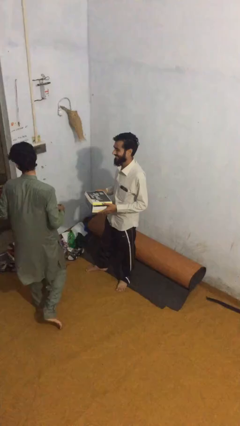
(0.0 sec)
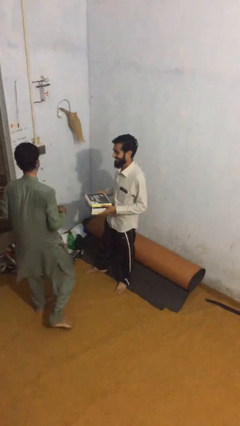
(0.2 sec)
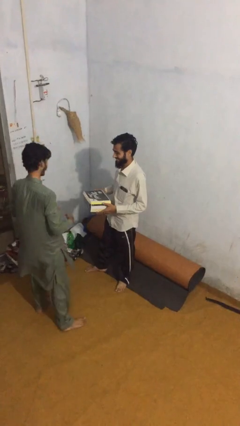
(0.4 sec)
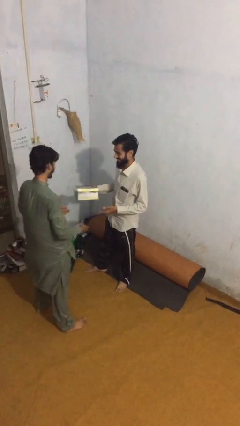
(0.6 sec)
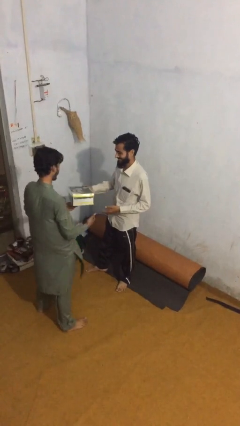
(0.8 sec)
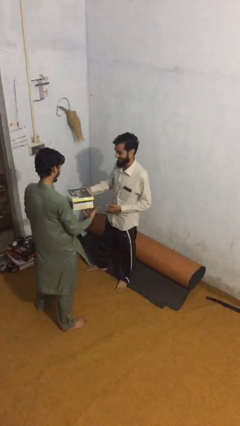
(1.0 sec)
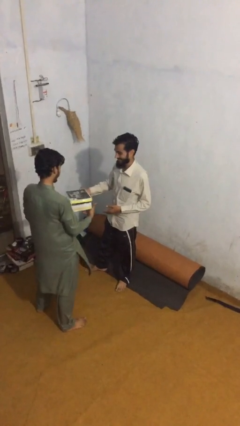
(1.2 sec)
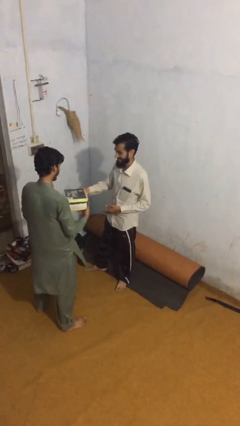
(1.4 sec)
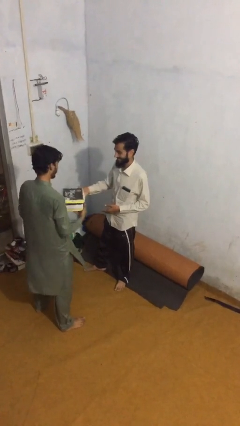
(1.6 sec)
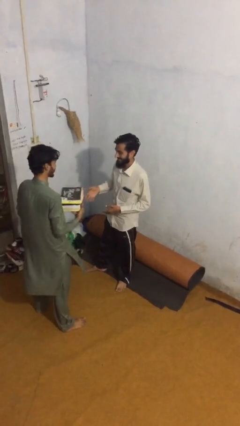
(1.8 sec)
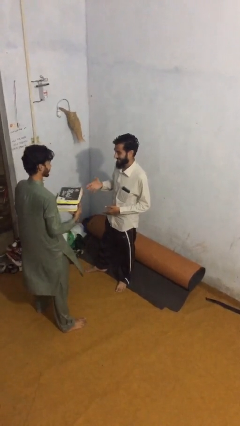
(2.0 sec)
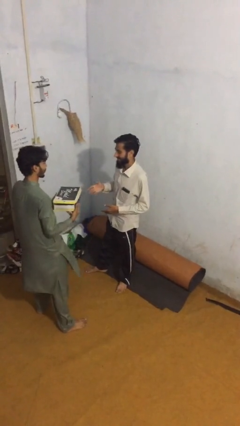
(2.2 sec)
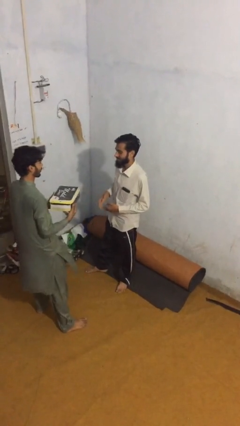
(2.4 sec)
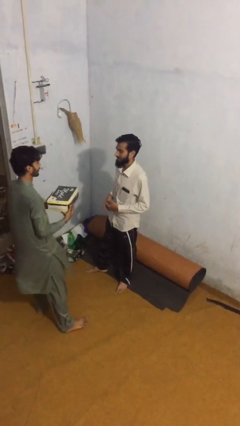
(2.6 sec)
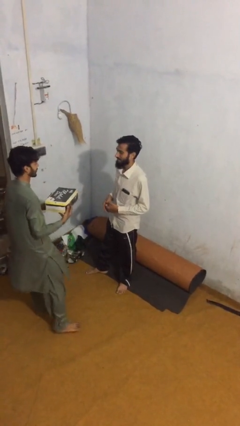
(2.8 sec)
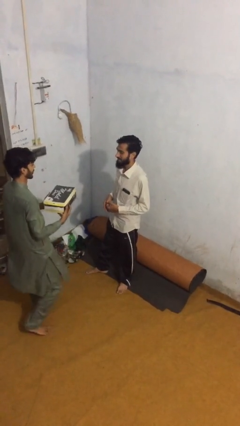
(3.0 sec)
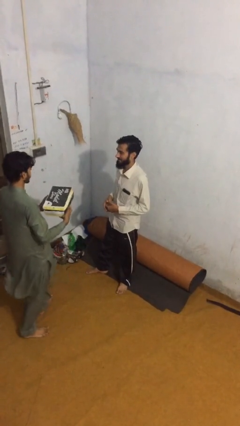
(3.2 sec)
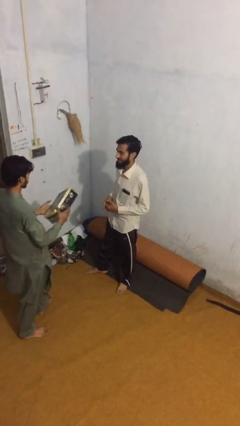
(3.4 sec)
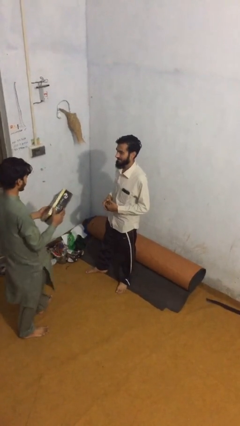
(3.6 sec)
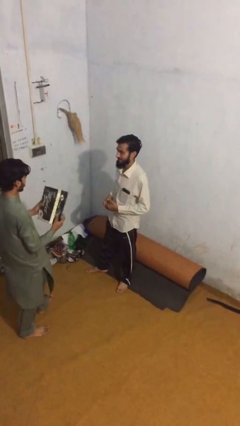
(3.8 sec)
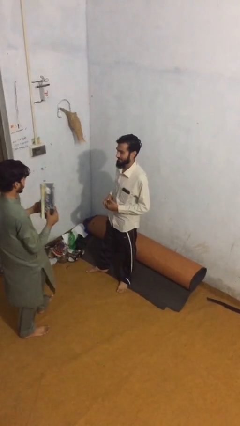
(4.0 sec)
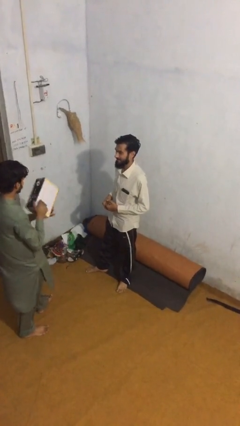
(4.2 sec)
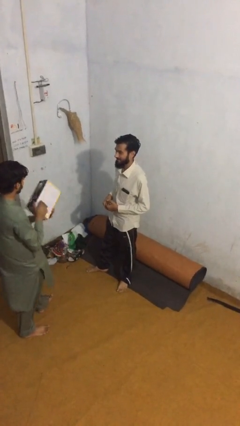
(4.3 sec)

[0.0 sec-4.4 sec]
person transfers object to person

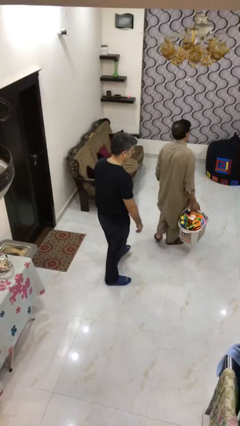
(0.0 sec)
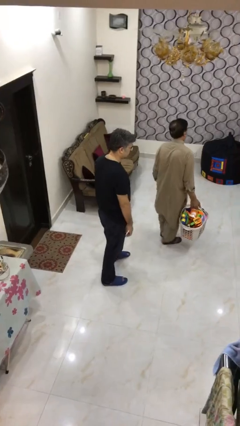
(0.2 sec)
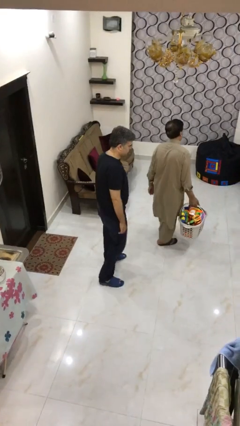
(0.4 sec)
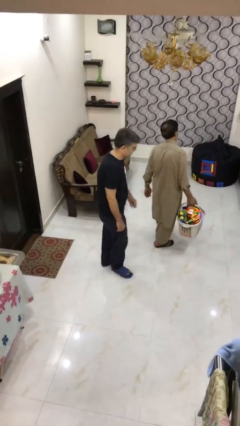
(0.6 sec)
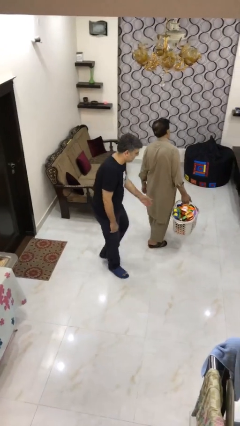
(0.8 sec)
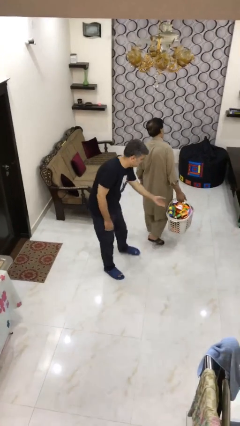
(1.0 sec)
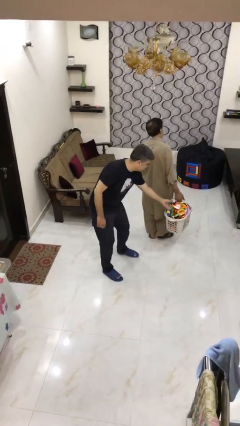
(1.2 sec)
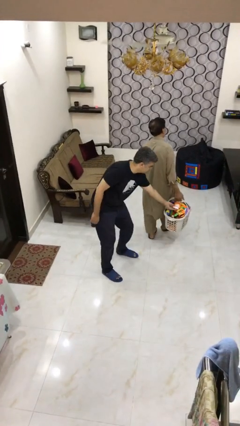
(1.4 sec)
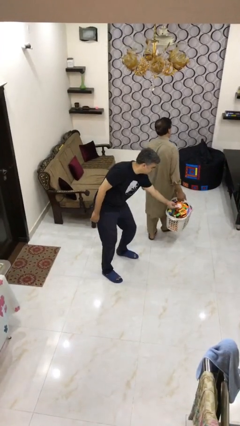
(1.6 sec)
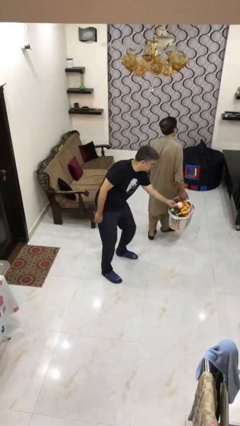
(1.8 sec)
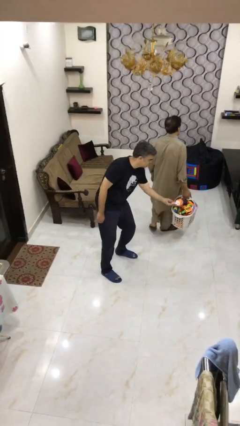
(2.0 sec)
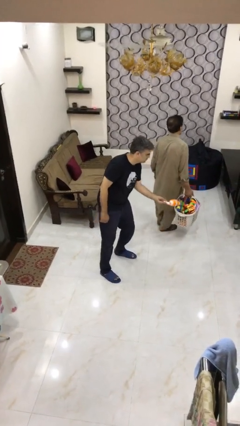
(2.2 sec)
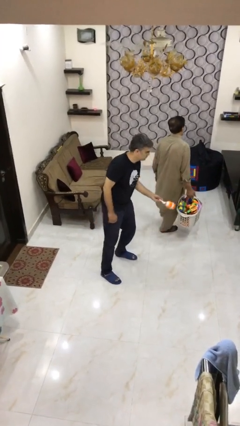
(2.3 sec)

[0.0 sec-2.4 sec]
person steals object from person

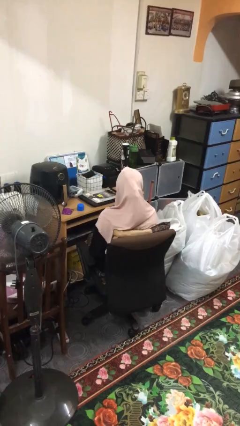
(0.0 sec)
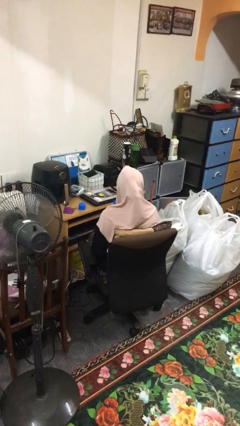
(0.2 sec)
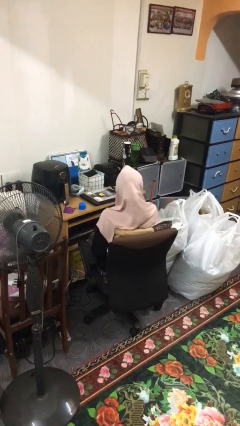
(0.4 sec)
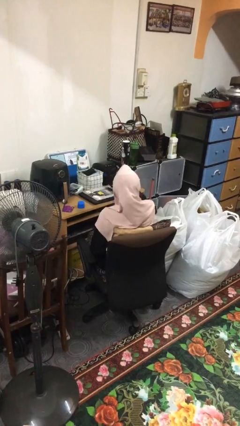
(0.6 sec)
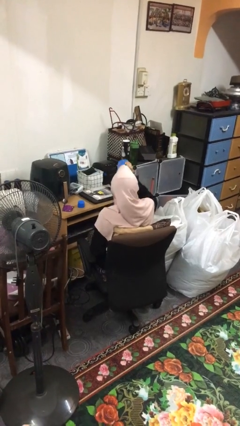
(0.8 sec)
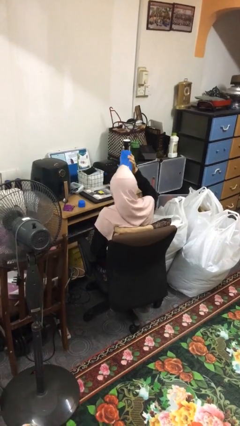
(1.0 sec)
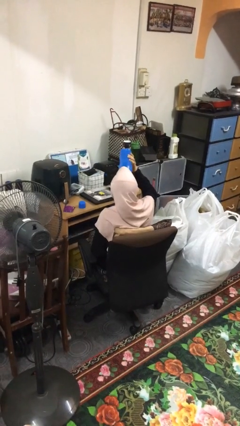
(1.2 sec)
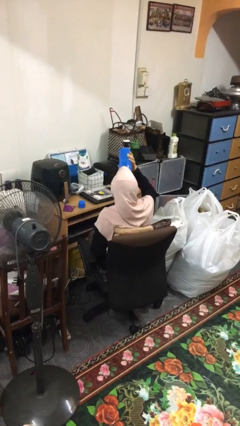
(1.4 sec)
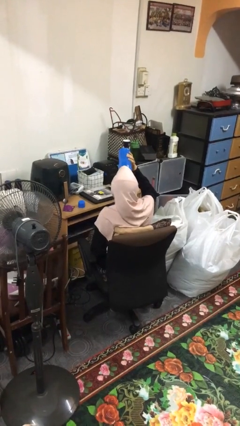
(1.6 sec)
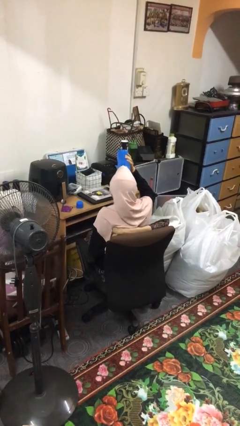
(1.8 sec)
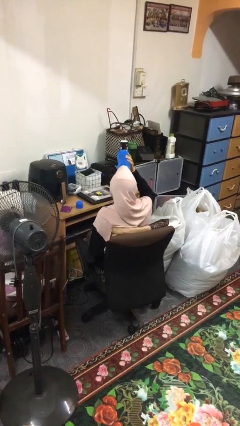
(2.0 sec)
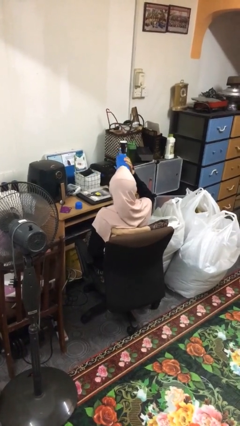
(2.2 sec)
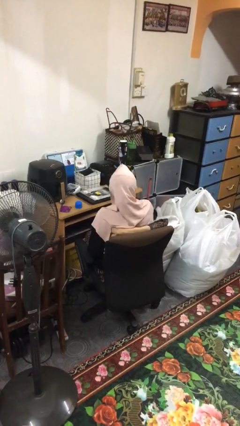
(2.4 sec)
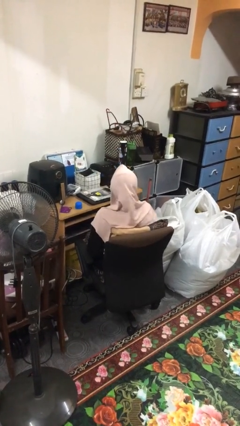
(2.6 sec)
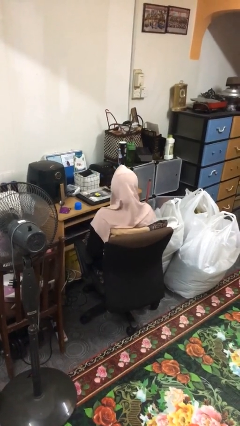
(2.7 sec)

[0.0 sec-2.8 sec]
person drinks from bottle

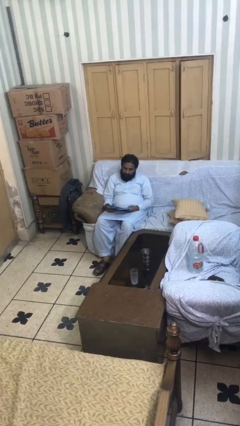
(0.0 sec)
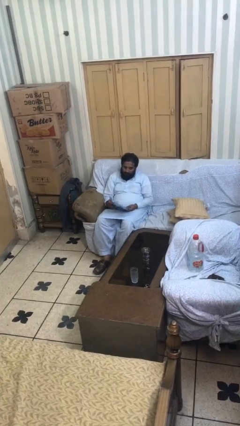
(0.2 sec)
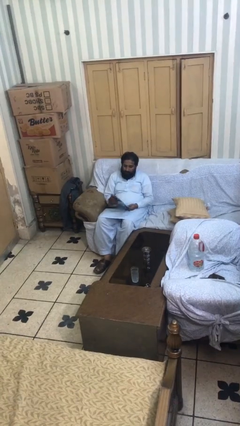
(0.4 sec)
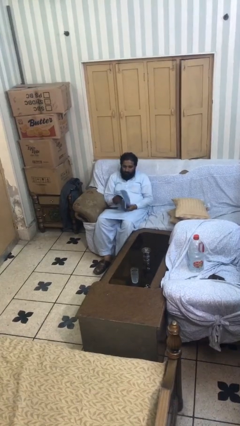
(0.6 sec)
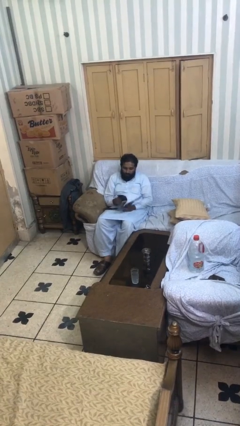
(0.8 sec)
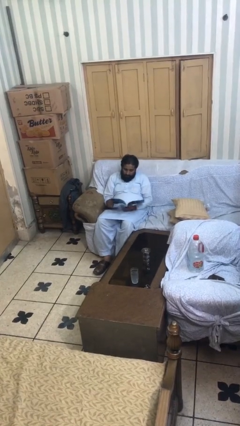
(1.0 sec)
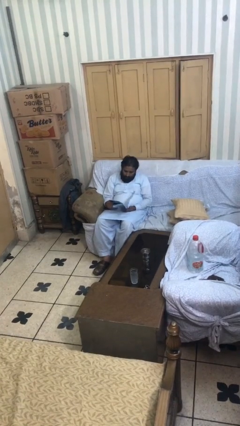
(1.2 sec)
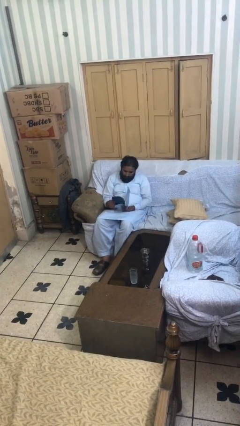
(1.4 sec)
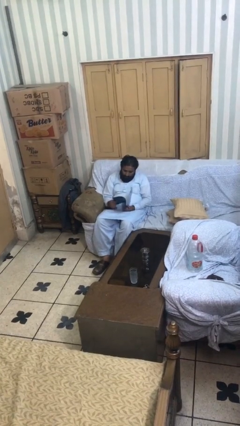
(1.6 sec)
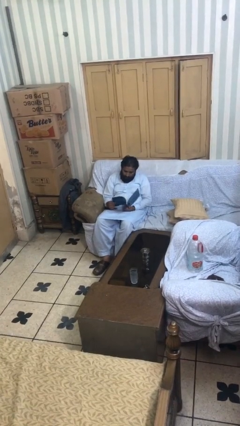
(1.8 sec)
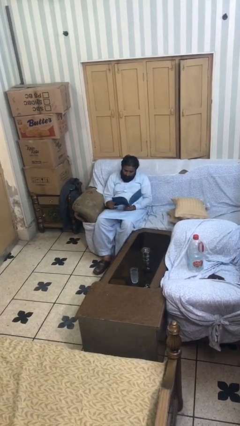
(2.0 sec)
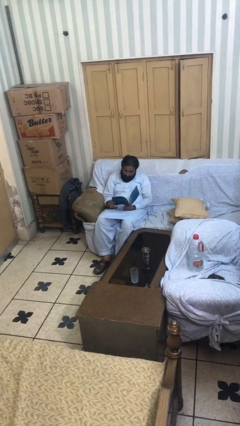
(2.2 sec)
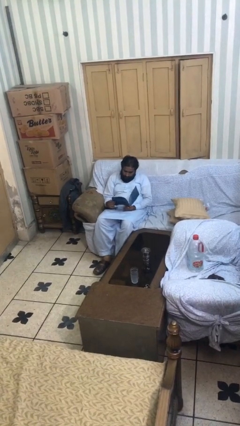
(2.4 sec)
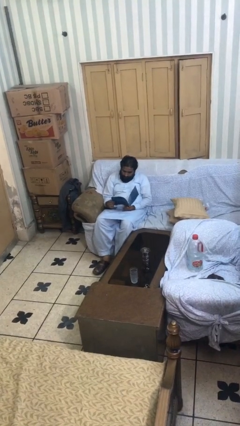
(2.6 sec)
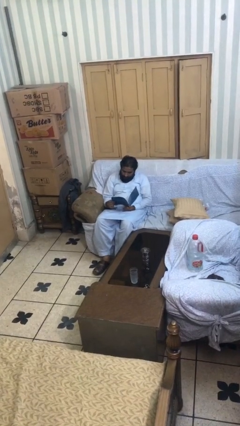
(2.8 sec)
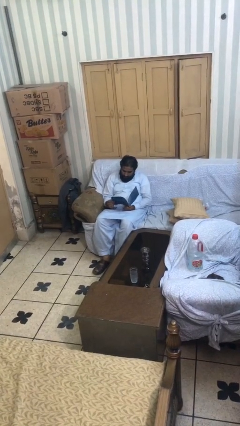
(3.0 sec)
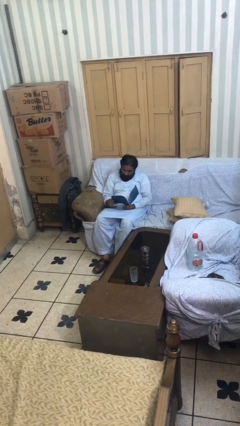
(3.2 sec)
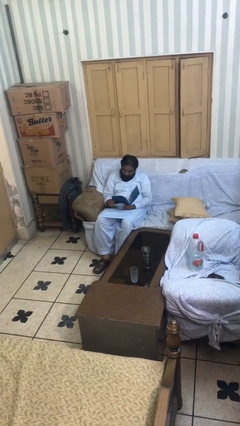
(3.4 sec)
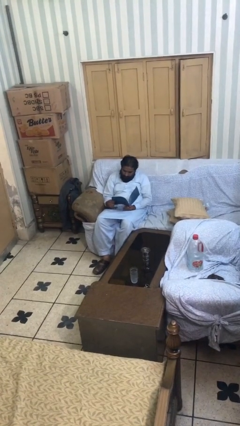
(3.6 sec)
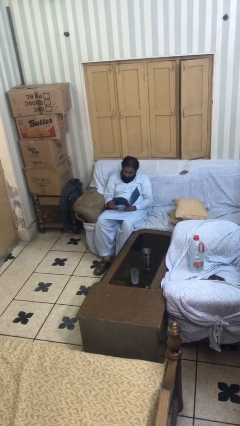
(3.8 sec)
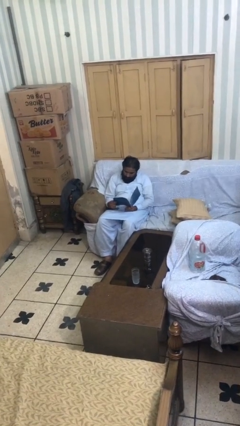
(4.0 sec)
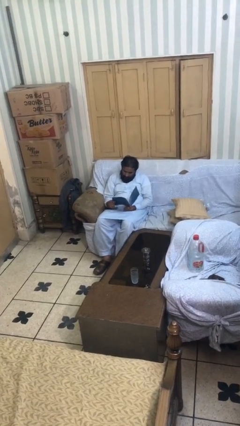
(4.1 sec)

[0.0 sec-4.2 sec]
person reads document

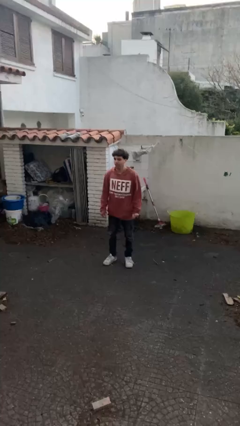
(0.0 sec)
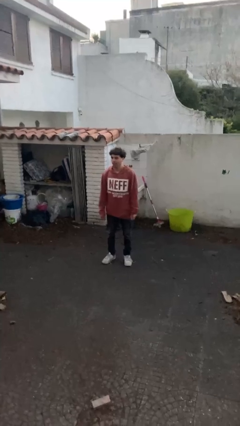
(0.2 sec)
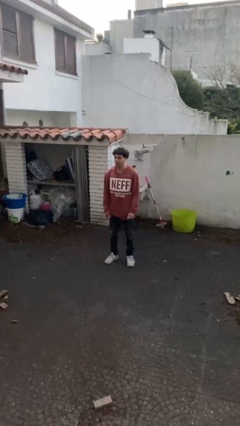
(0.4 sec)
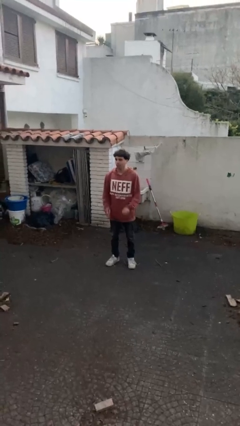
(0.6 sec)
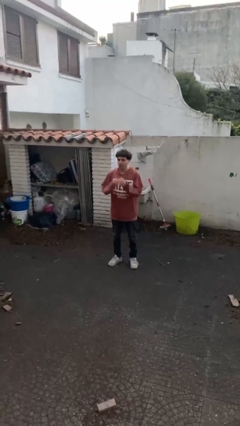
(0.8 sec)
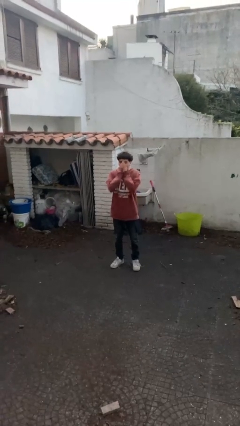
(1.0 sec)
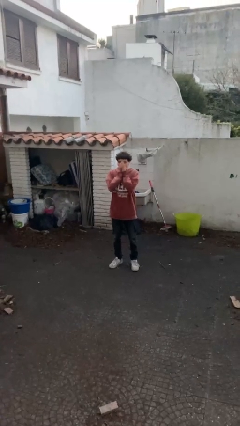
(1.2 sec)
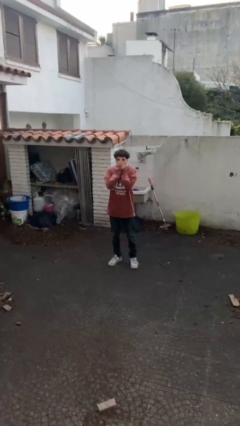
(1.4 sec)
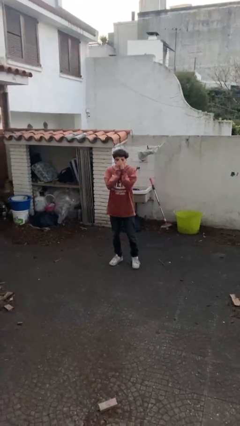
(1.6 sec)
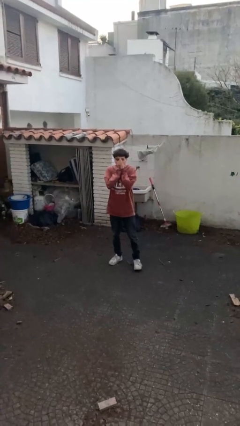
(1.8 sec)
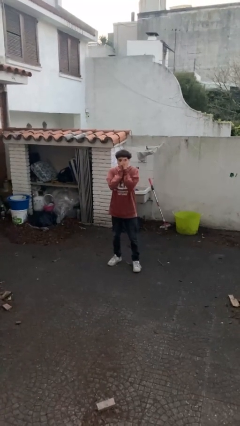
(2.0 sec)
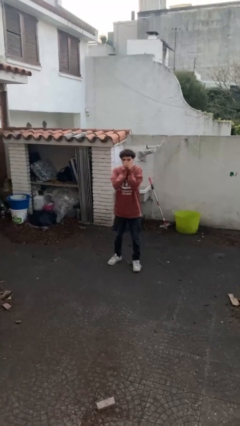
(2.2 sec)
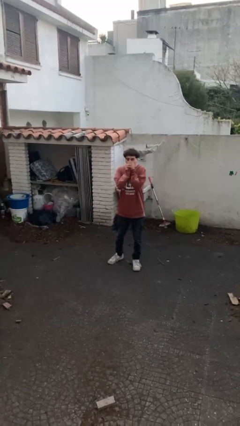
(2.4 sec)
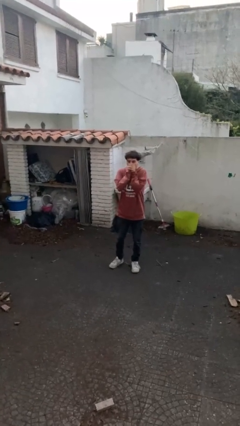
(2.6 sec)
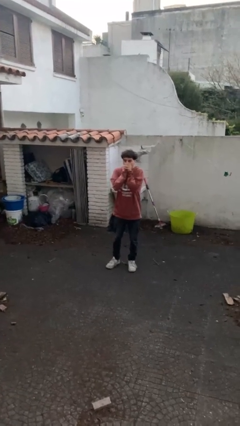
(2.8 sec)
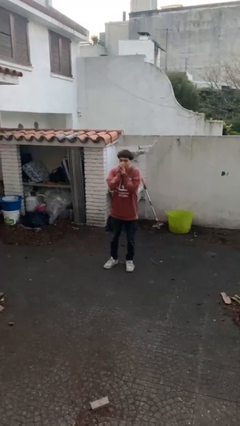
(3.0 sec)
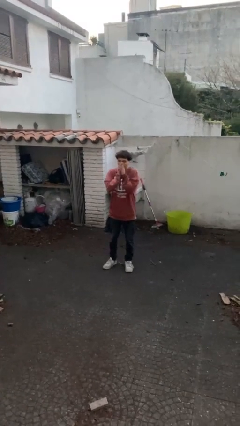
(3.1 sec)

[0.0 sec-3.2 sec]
person blows into hands
